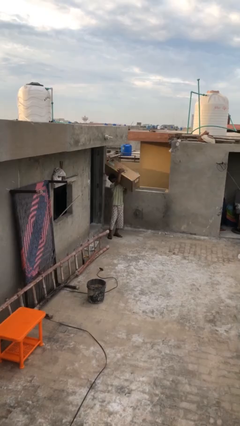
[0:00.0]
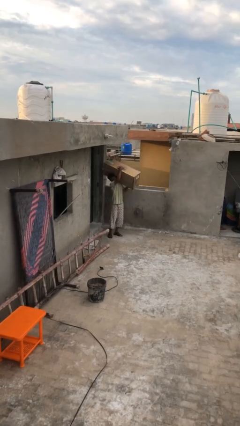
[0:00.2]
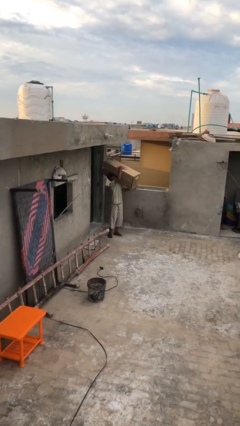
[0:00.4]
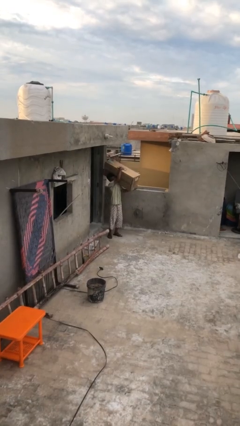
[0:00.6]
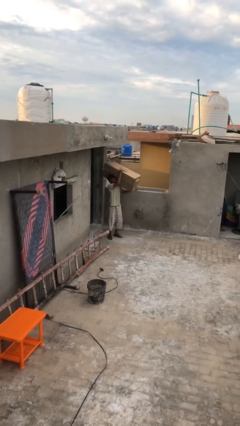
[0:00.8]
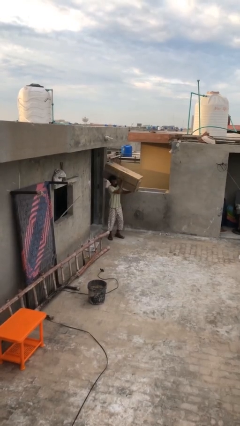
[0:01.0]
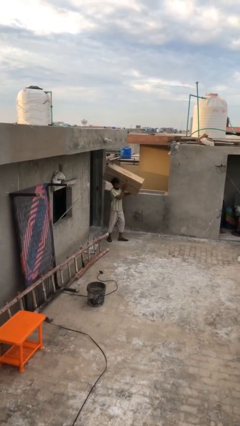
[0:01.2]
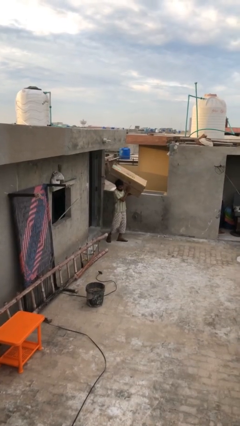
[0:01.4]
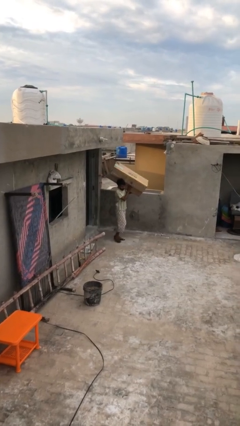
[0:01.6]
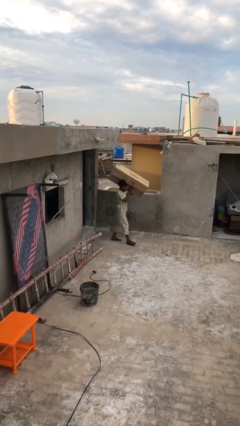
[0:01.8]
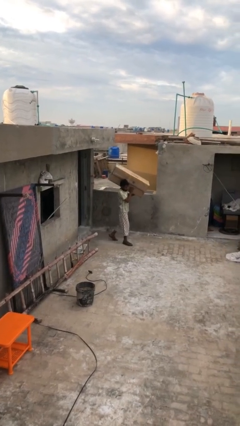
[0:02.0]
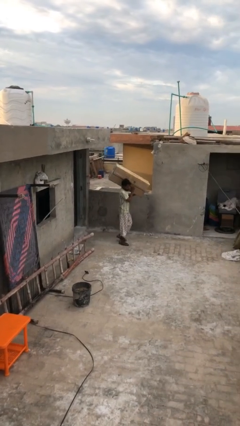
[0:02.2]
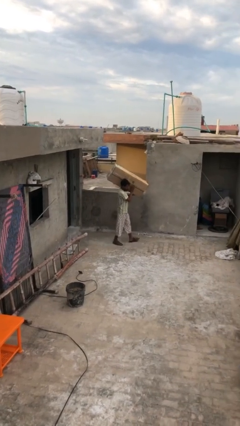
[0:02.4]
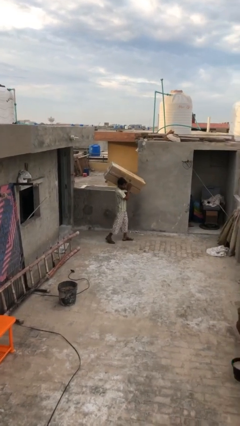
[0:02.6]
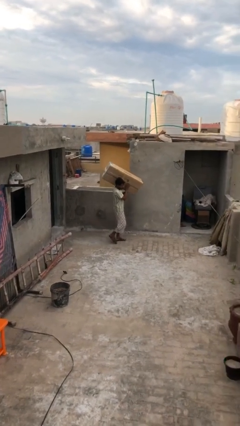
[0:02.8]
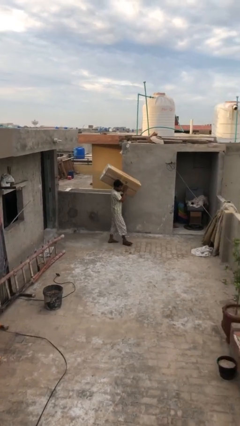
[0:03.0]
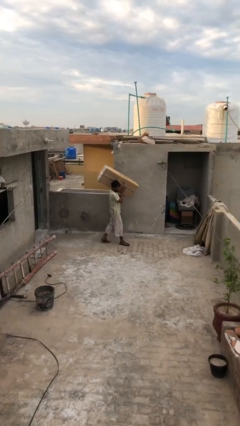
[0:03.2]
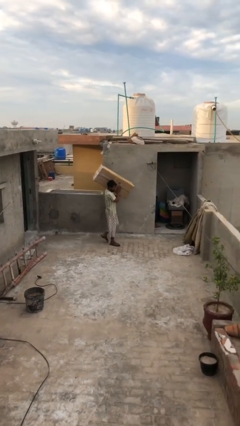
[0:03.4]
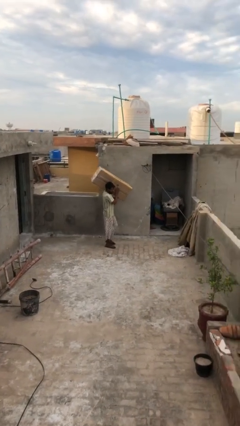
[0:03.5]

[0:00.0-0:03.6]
person carries heavy object

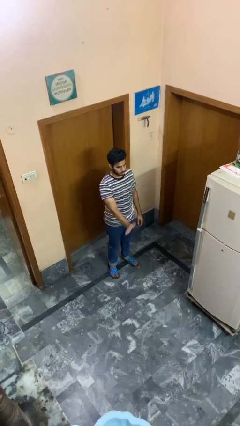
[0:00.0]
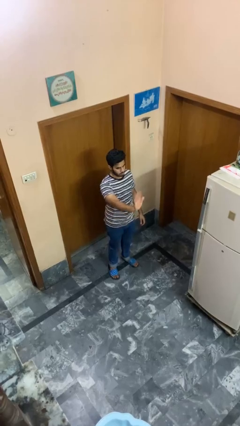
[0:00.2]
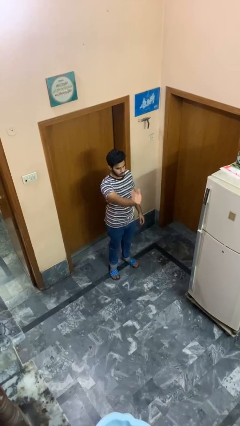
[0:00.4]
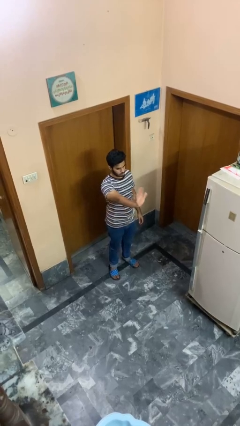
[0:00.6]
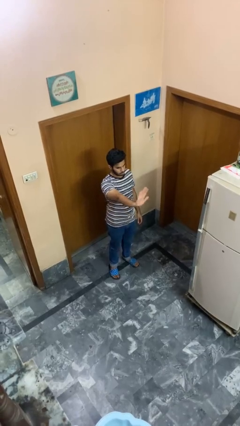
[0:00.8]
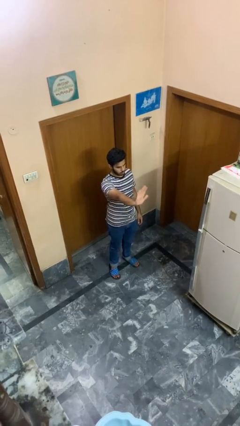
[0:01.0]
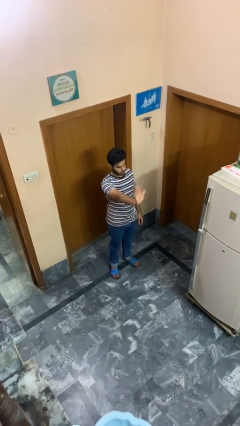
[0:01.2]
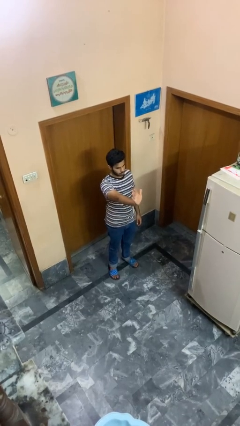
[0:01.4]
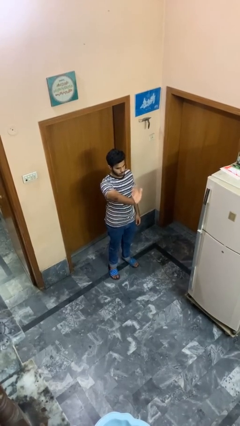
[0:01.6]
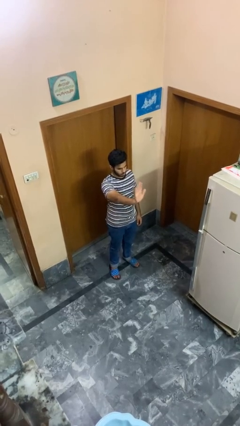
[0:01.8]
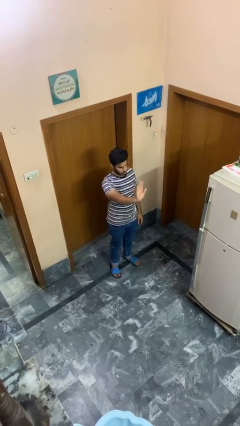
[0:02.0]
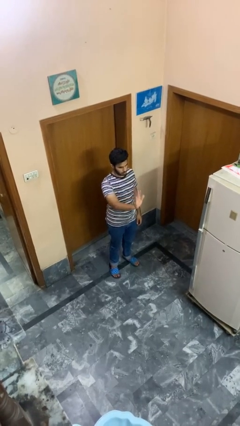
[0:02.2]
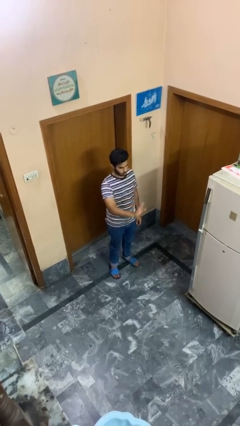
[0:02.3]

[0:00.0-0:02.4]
person waves at person

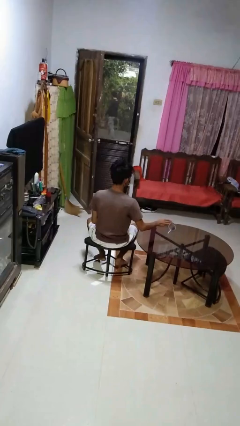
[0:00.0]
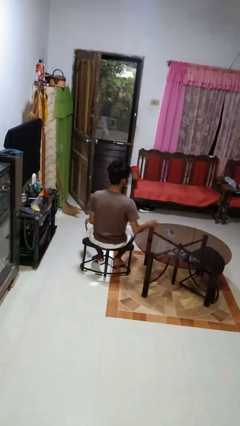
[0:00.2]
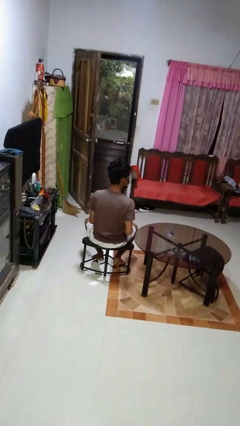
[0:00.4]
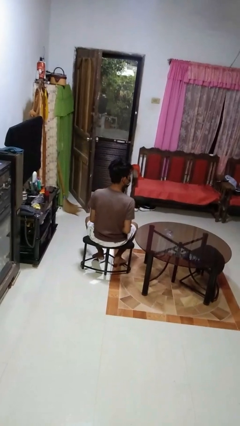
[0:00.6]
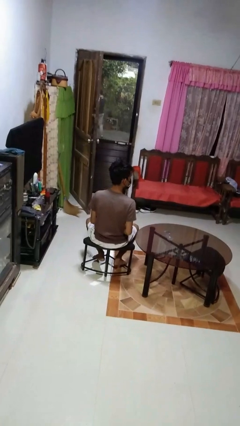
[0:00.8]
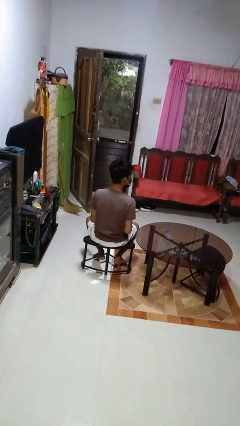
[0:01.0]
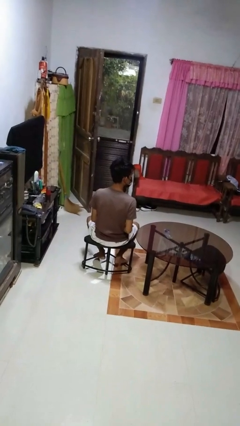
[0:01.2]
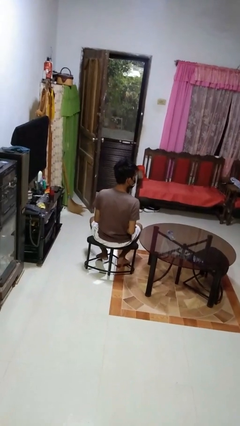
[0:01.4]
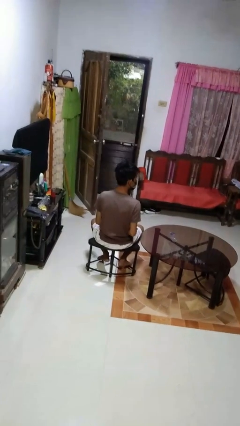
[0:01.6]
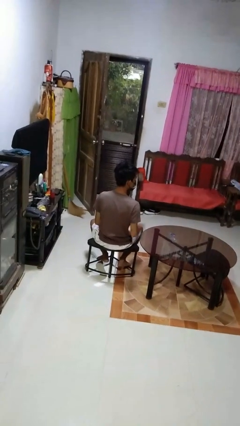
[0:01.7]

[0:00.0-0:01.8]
person knocks over glass

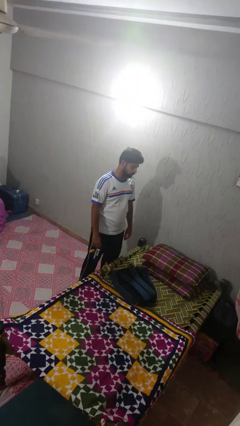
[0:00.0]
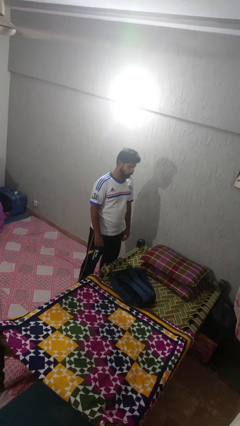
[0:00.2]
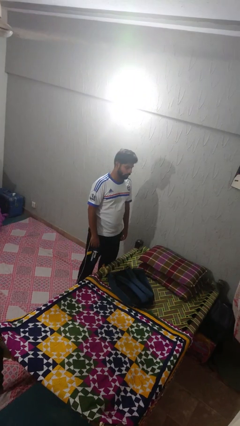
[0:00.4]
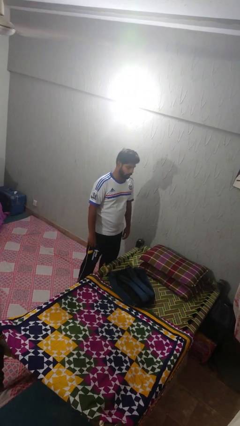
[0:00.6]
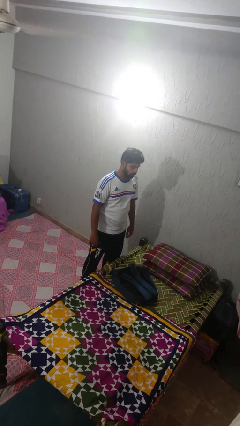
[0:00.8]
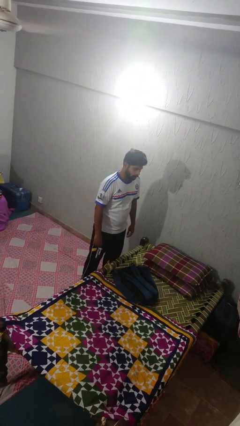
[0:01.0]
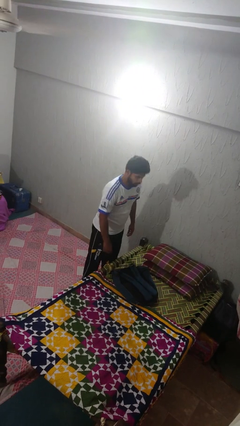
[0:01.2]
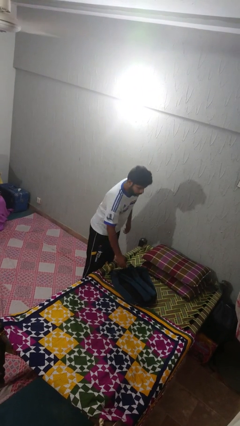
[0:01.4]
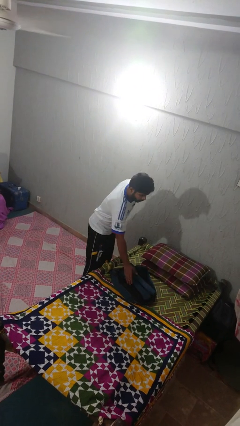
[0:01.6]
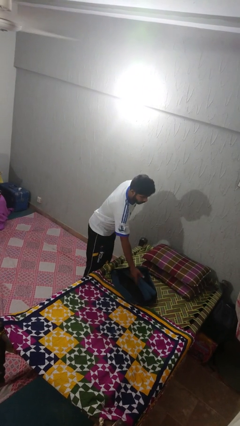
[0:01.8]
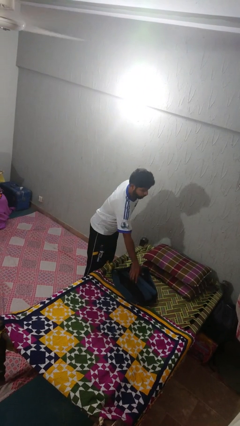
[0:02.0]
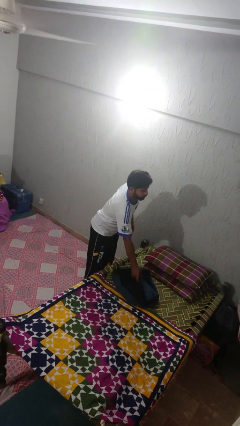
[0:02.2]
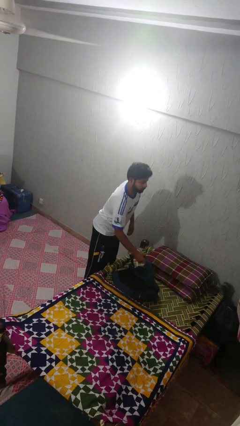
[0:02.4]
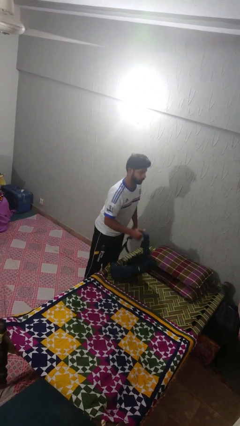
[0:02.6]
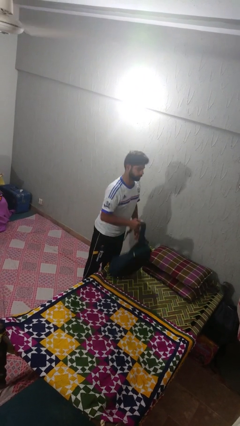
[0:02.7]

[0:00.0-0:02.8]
person picks up object from bed

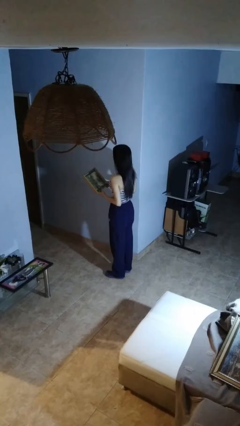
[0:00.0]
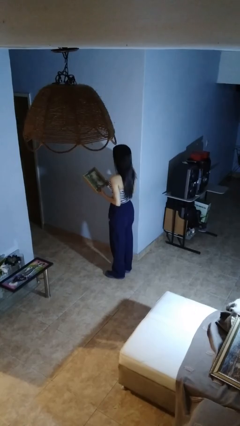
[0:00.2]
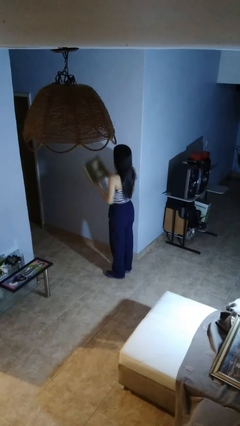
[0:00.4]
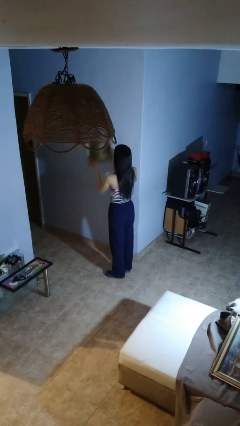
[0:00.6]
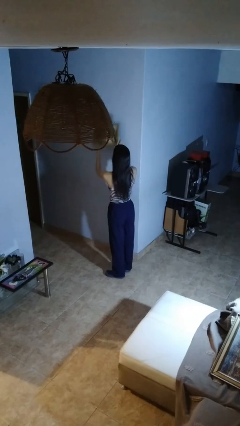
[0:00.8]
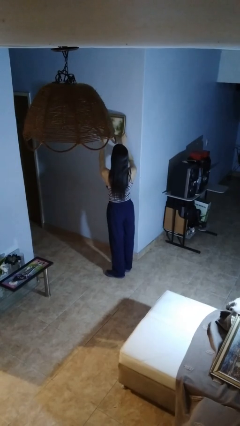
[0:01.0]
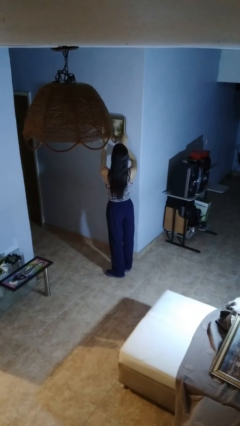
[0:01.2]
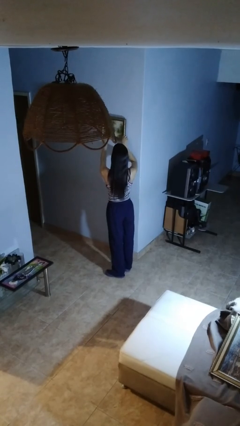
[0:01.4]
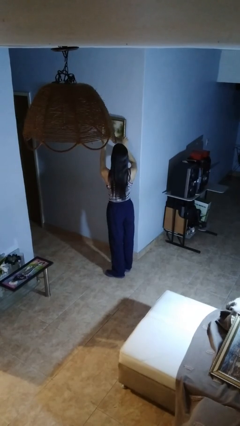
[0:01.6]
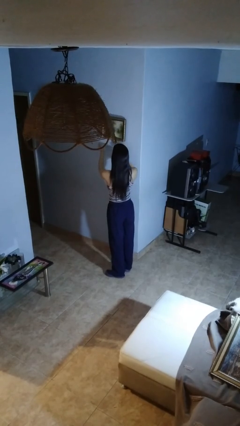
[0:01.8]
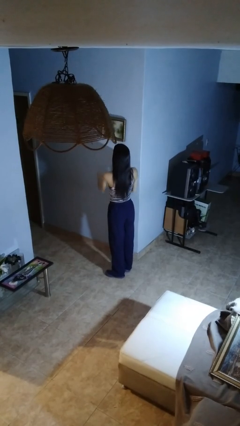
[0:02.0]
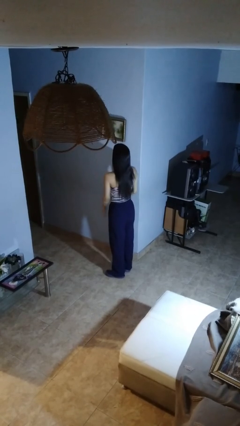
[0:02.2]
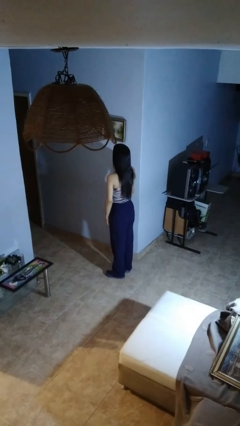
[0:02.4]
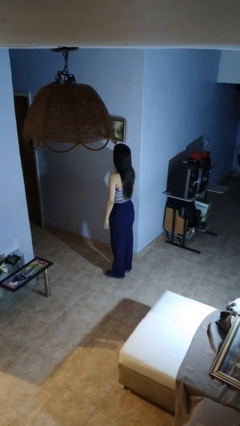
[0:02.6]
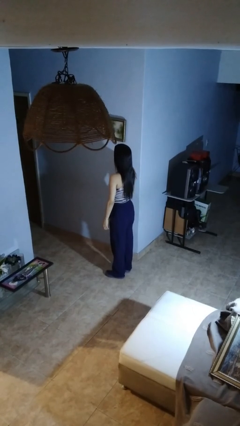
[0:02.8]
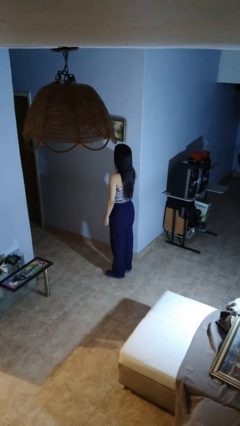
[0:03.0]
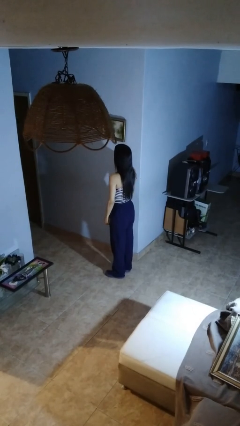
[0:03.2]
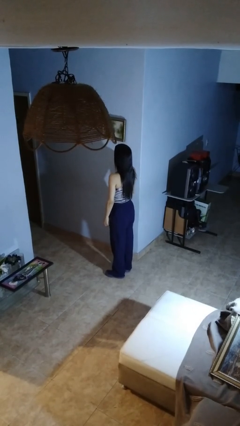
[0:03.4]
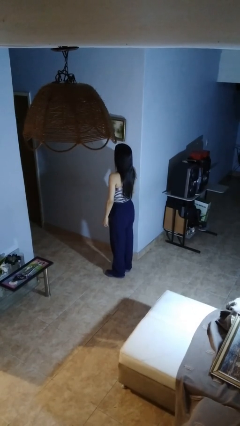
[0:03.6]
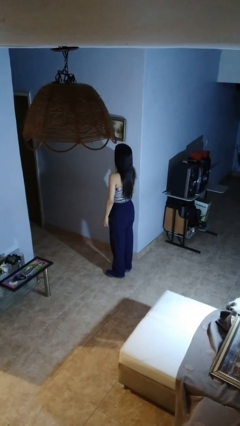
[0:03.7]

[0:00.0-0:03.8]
person puts up picture frame

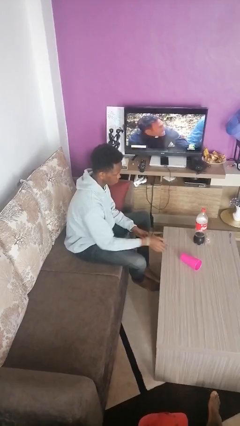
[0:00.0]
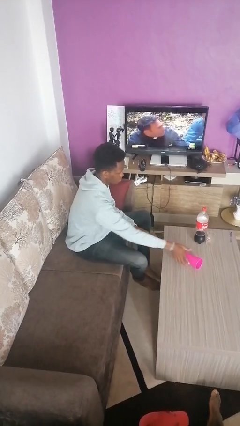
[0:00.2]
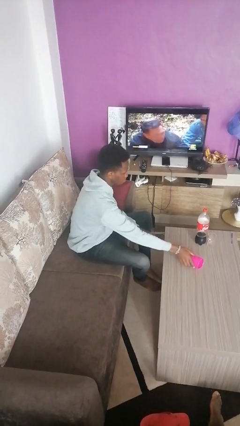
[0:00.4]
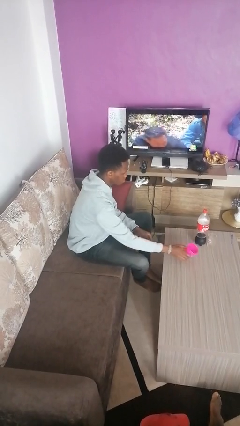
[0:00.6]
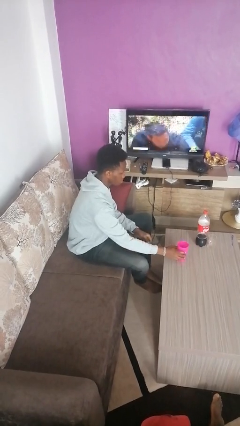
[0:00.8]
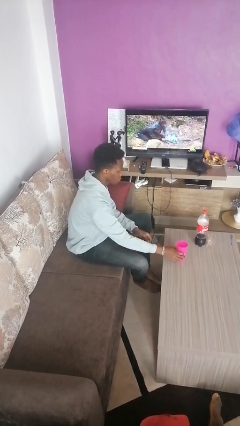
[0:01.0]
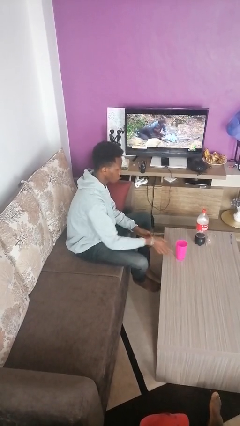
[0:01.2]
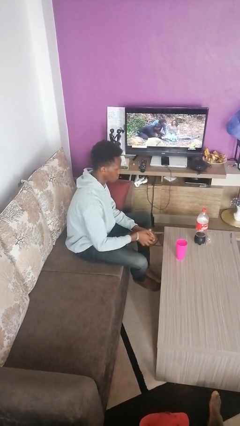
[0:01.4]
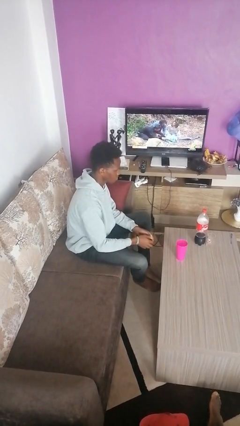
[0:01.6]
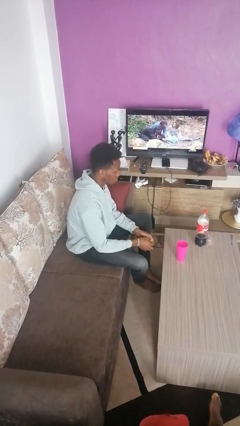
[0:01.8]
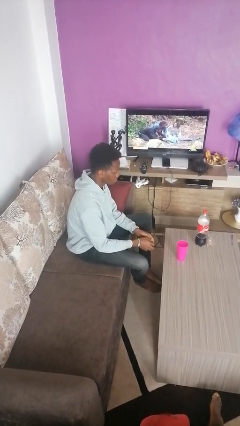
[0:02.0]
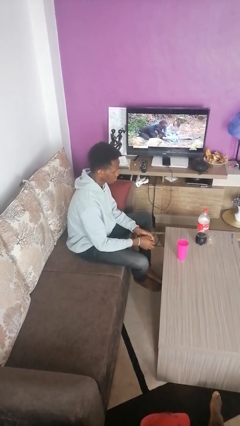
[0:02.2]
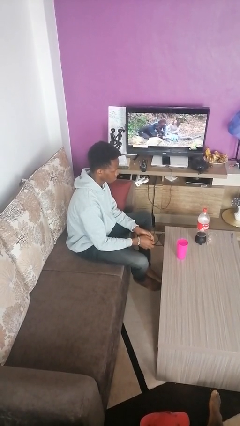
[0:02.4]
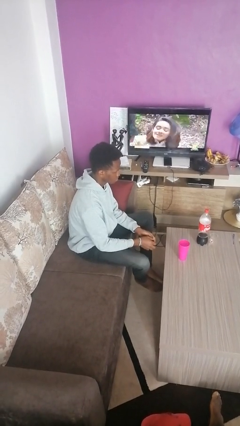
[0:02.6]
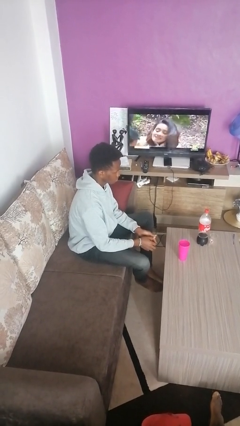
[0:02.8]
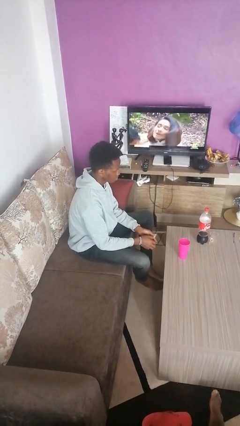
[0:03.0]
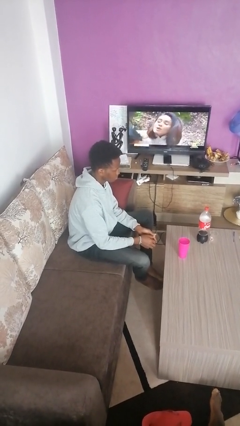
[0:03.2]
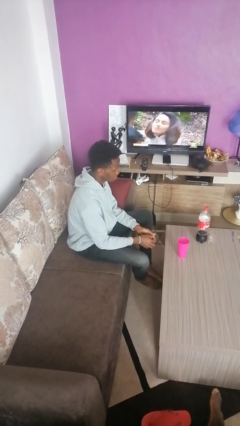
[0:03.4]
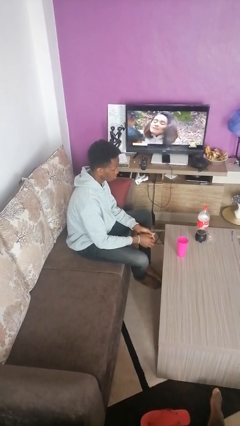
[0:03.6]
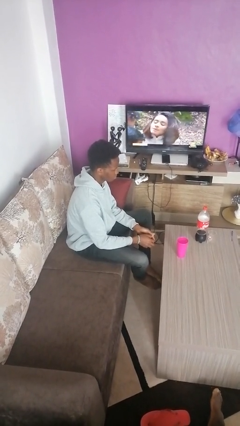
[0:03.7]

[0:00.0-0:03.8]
person sets upright glass
